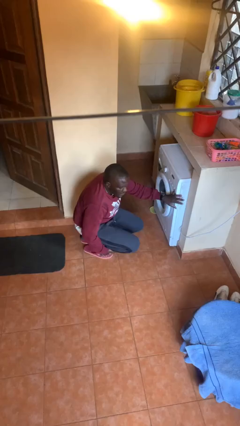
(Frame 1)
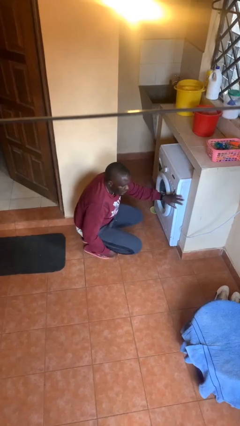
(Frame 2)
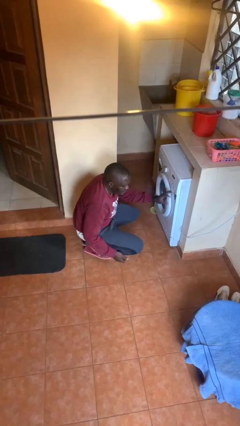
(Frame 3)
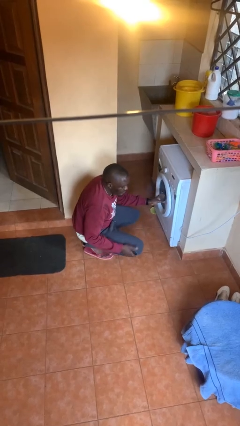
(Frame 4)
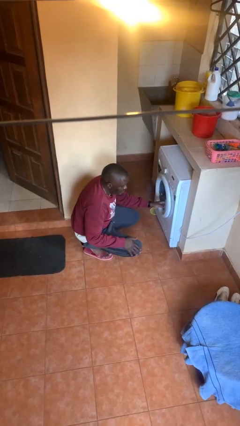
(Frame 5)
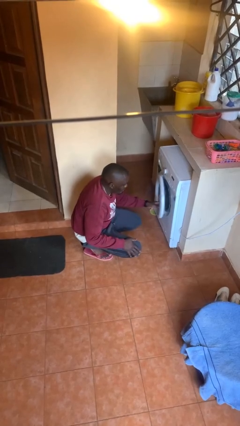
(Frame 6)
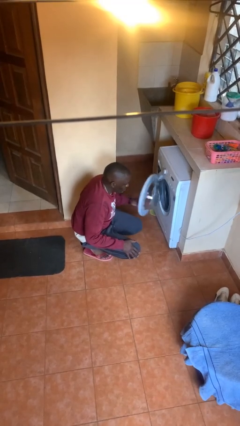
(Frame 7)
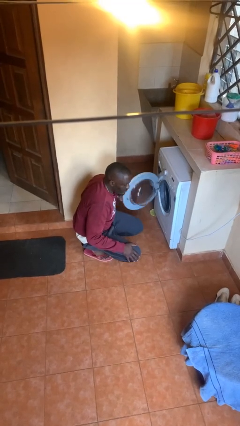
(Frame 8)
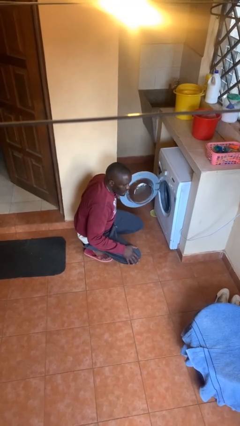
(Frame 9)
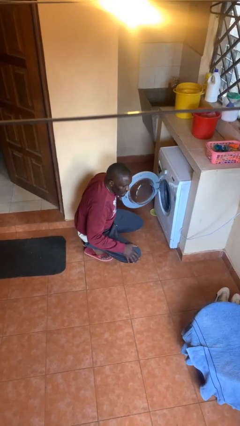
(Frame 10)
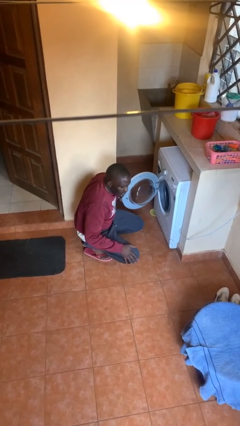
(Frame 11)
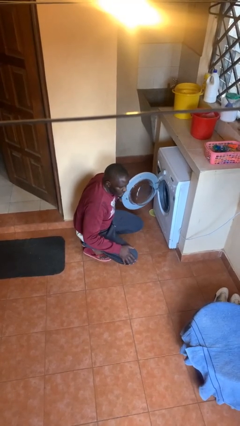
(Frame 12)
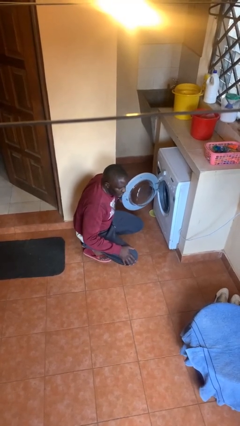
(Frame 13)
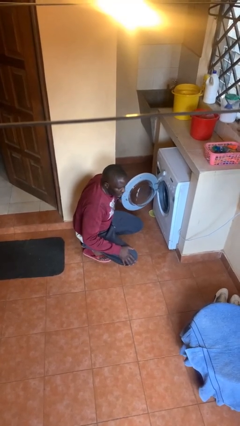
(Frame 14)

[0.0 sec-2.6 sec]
person opens clothes washer

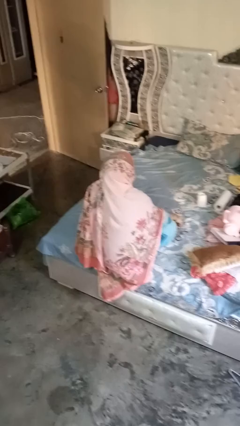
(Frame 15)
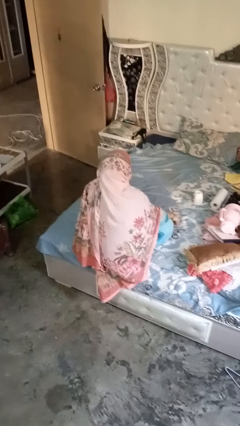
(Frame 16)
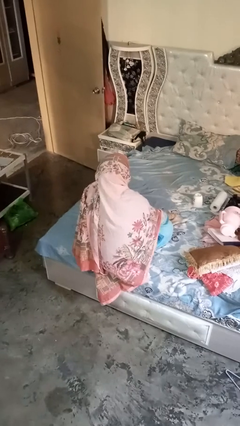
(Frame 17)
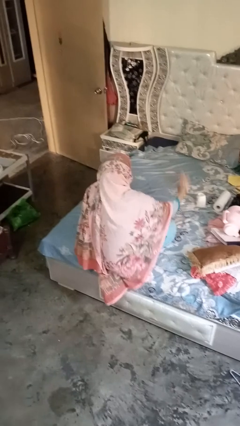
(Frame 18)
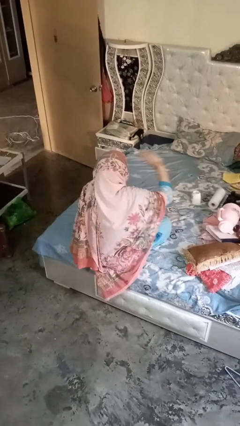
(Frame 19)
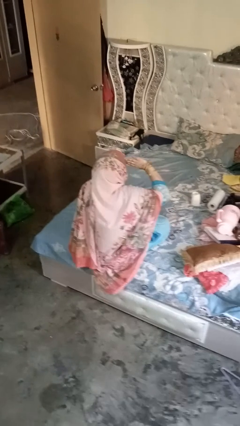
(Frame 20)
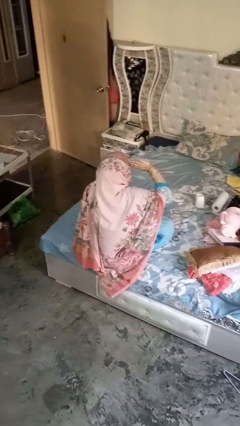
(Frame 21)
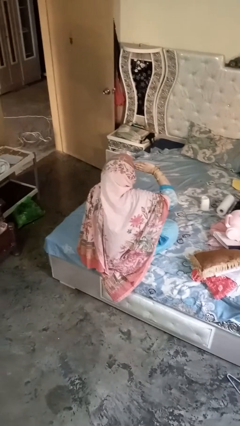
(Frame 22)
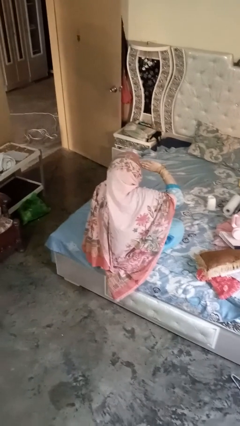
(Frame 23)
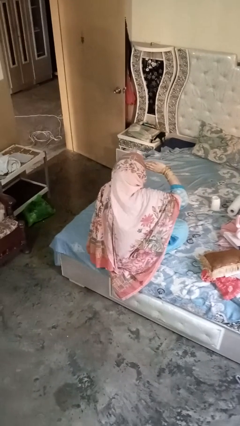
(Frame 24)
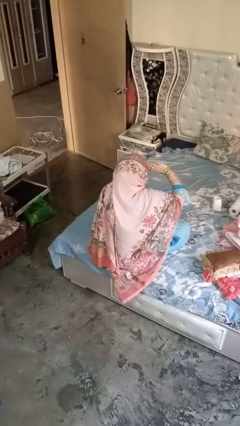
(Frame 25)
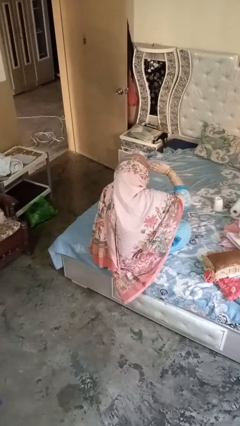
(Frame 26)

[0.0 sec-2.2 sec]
person salutes

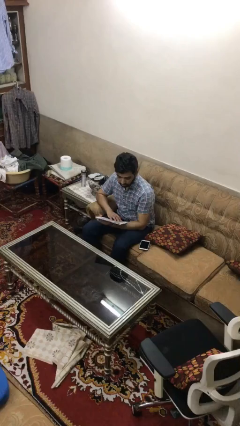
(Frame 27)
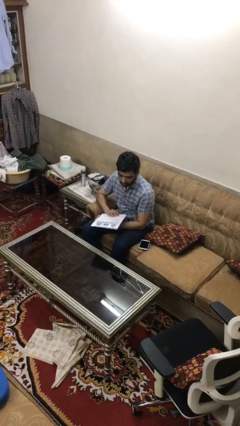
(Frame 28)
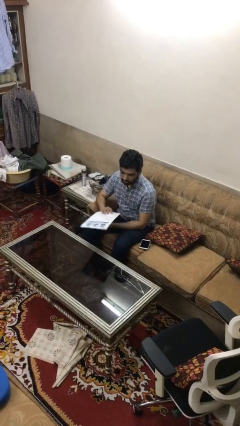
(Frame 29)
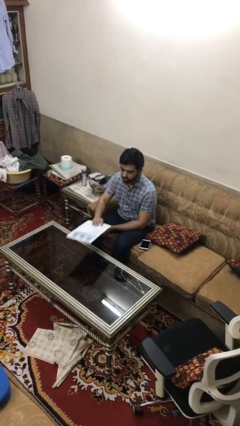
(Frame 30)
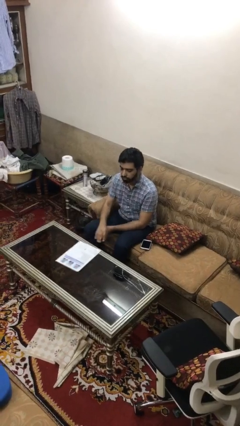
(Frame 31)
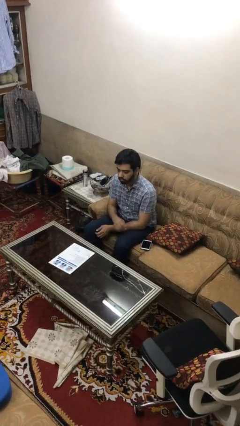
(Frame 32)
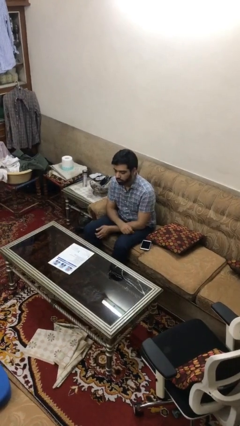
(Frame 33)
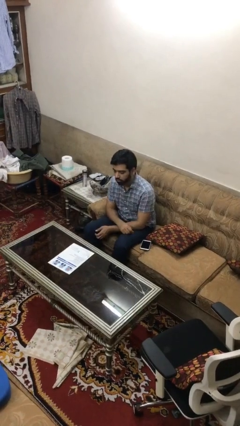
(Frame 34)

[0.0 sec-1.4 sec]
person puts down object on table

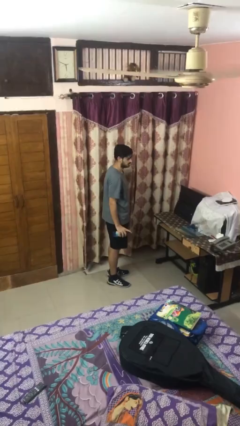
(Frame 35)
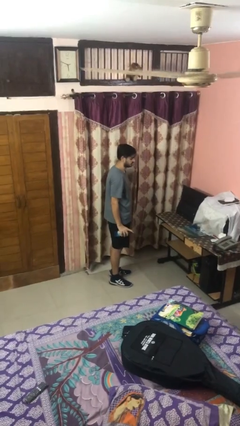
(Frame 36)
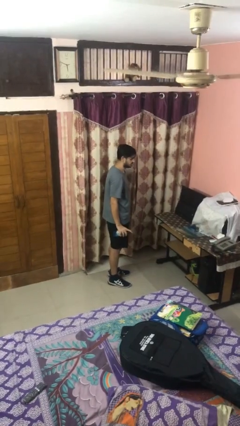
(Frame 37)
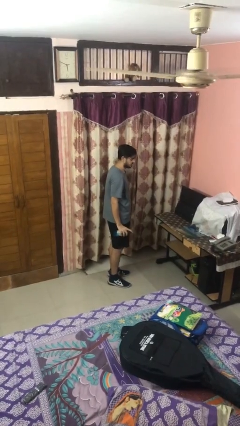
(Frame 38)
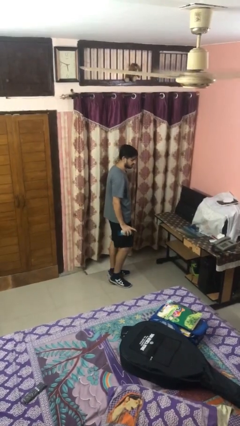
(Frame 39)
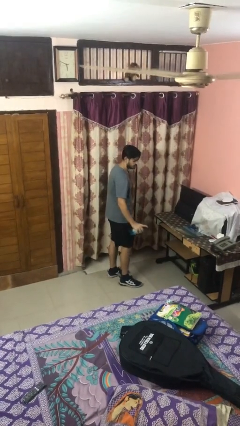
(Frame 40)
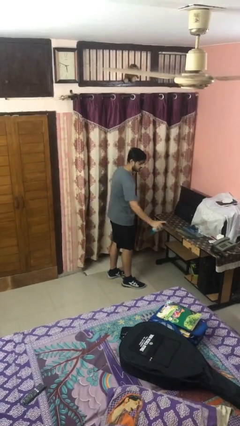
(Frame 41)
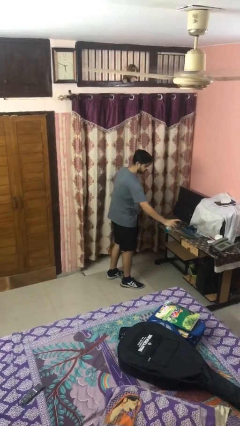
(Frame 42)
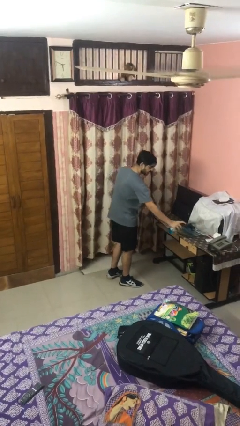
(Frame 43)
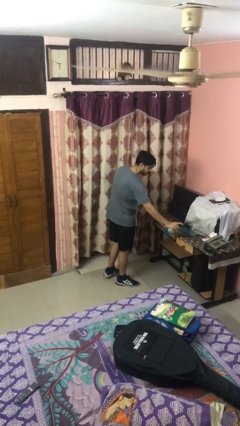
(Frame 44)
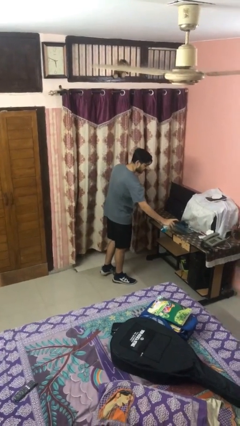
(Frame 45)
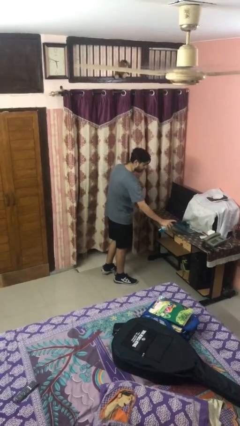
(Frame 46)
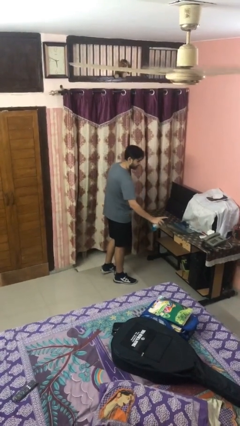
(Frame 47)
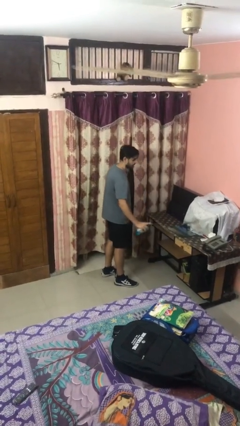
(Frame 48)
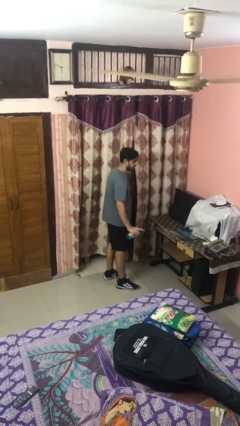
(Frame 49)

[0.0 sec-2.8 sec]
person sprays from bottle

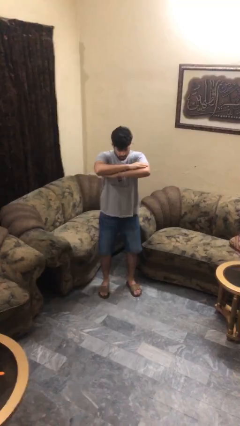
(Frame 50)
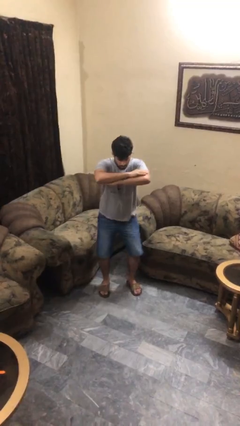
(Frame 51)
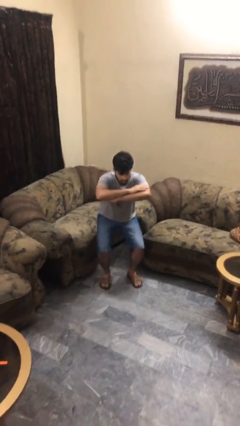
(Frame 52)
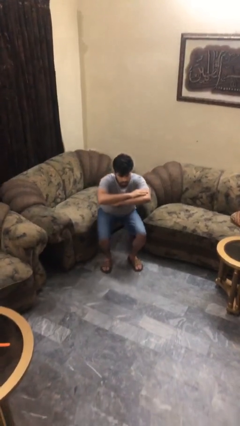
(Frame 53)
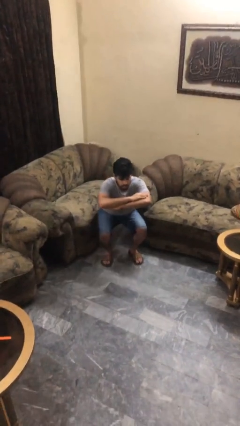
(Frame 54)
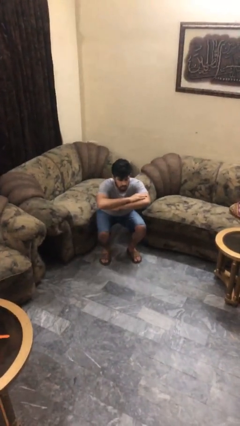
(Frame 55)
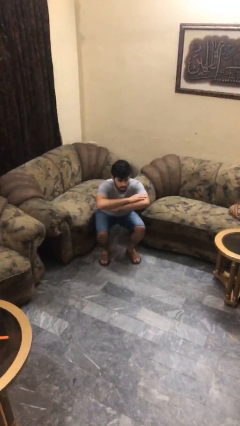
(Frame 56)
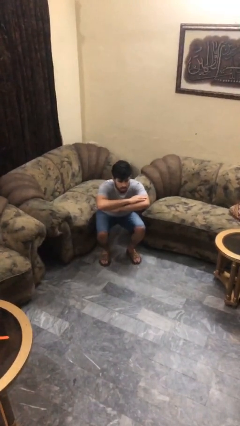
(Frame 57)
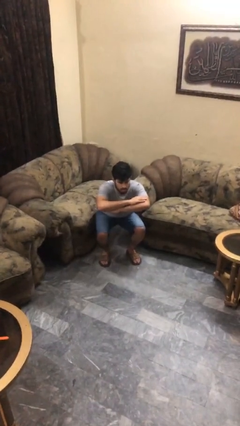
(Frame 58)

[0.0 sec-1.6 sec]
person squats

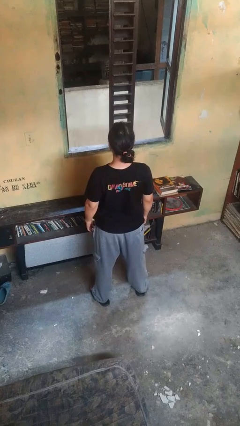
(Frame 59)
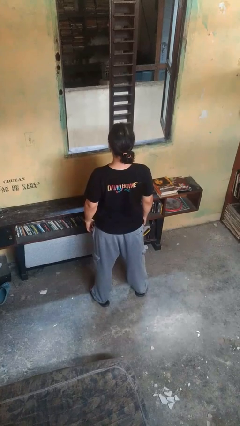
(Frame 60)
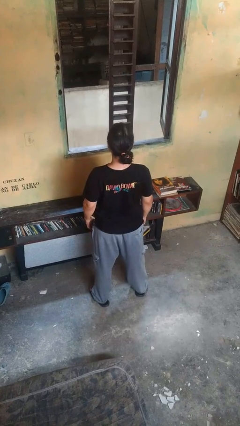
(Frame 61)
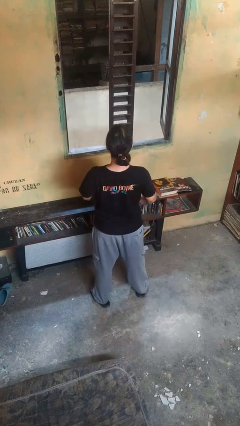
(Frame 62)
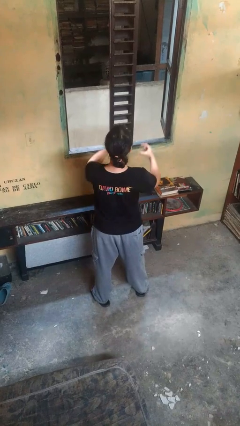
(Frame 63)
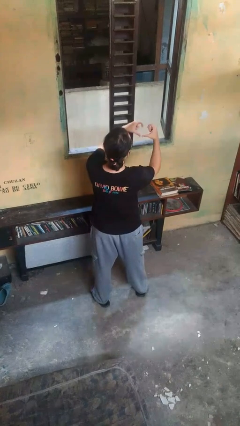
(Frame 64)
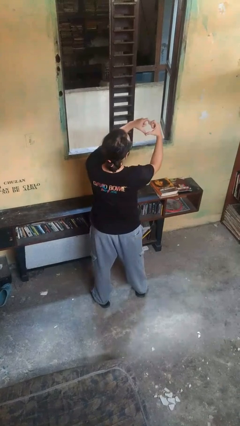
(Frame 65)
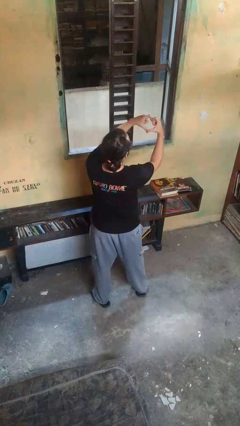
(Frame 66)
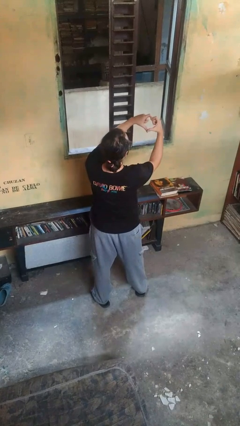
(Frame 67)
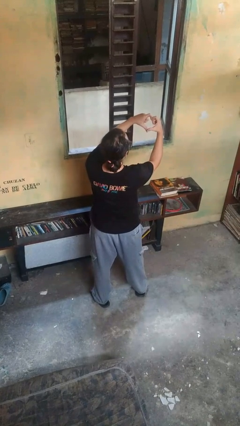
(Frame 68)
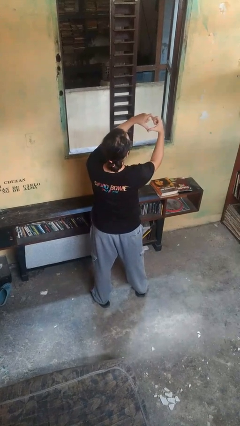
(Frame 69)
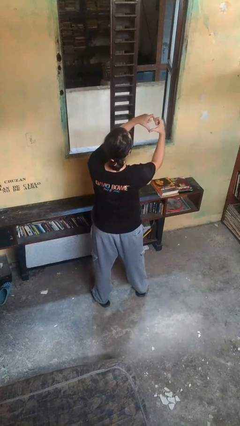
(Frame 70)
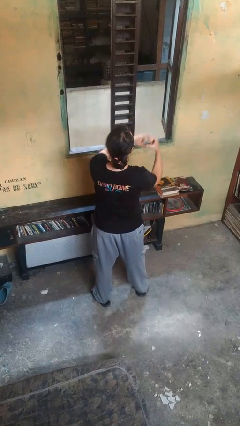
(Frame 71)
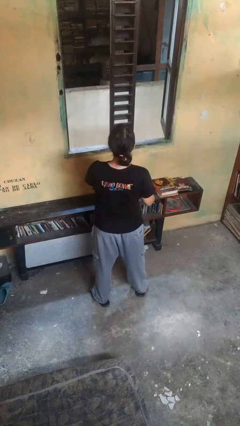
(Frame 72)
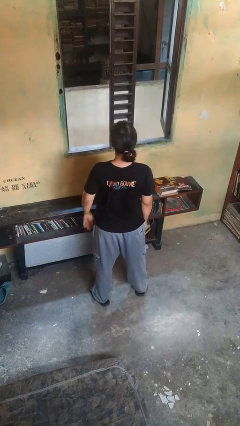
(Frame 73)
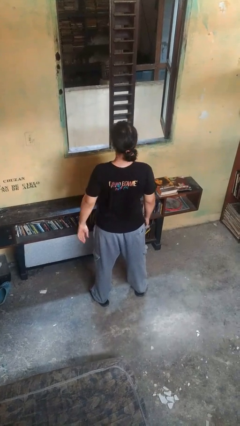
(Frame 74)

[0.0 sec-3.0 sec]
person gestures heart

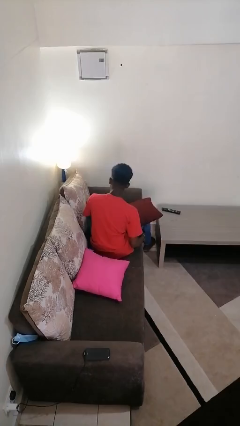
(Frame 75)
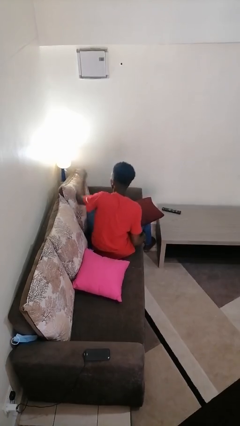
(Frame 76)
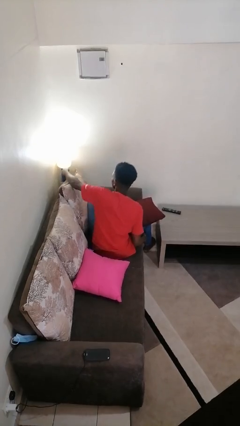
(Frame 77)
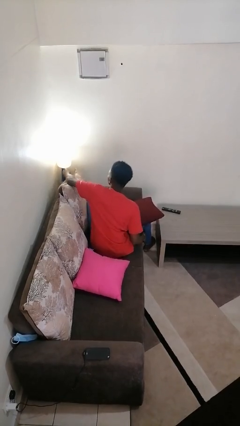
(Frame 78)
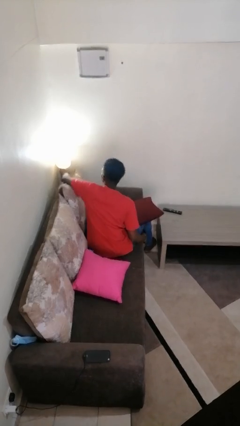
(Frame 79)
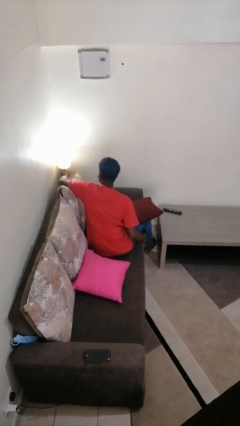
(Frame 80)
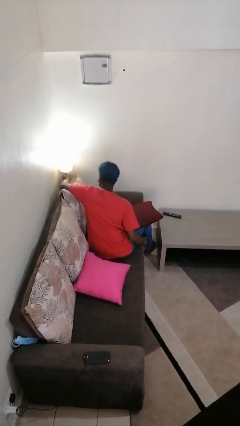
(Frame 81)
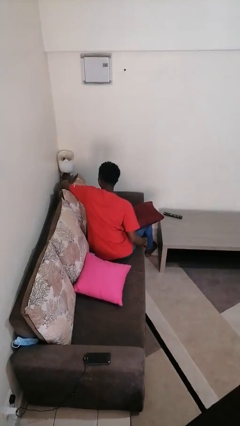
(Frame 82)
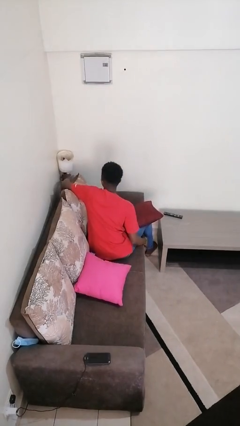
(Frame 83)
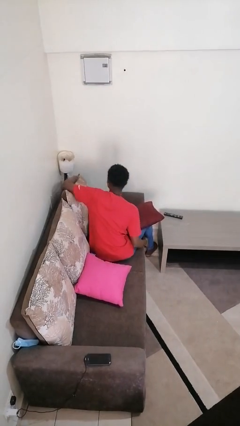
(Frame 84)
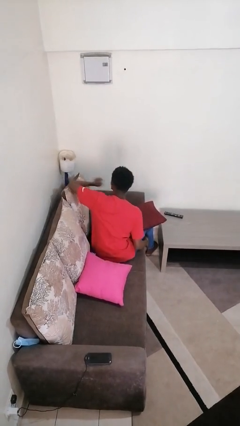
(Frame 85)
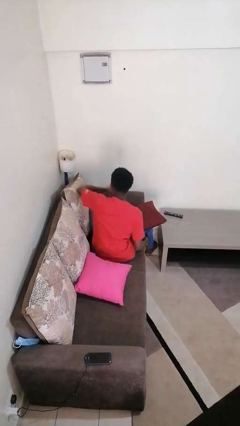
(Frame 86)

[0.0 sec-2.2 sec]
person turns off lamp

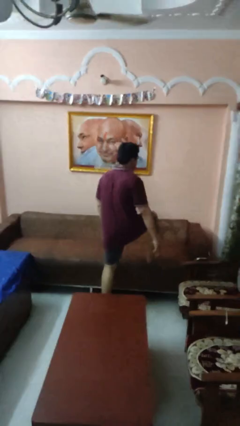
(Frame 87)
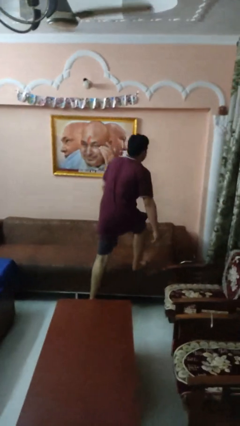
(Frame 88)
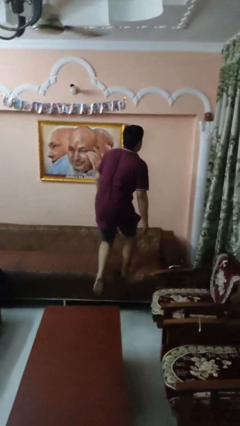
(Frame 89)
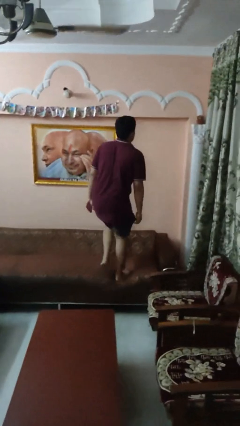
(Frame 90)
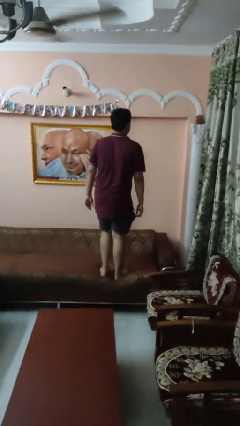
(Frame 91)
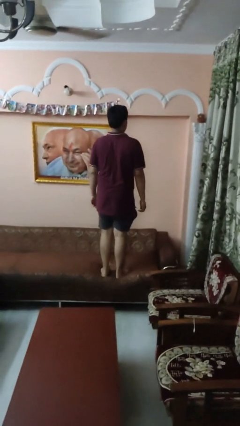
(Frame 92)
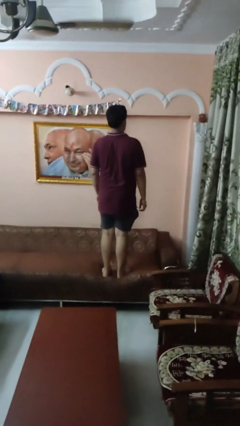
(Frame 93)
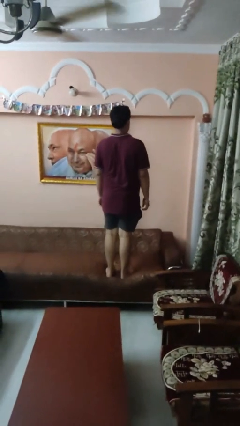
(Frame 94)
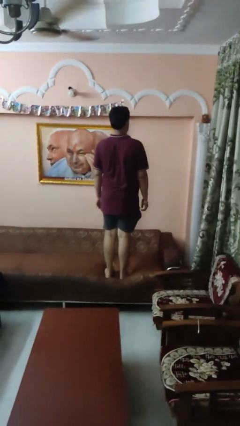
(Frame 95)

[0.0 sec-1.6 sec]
person climbs on couch
